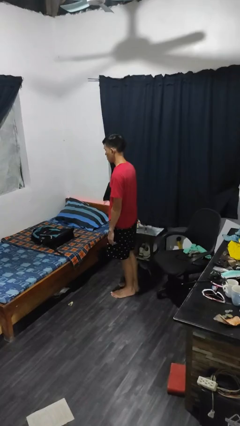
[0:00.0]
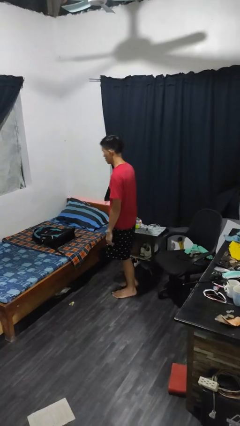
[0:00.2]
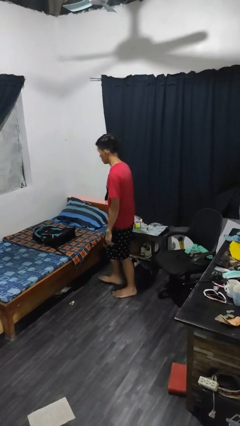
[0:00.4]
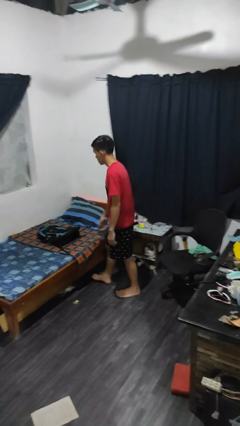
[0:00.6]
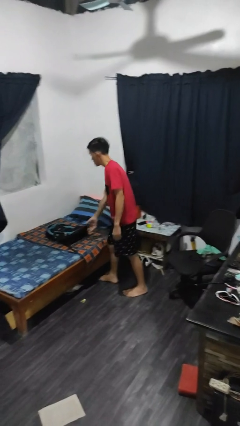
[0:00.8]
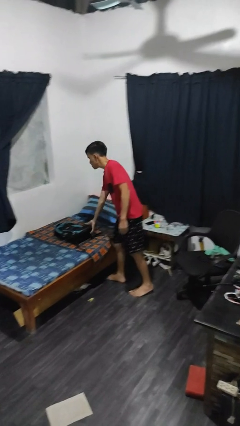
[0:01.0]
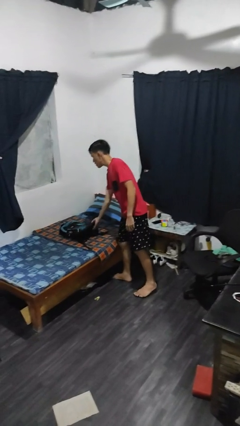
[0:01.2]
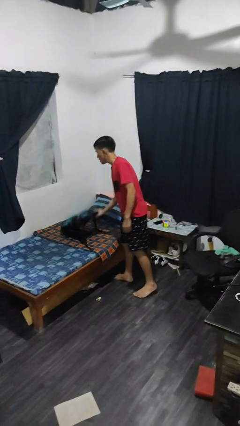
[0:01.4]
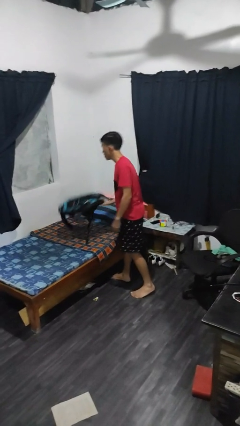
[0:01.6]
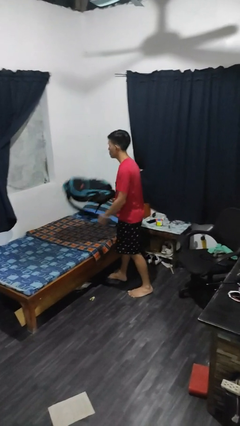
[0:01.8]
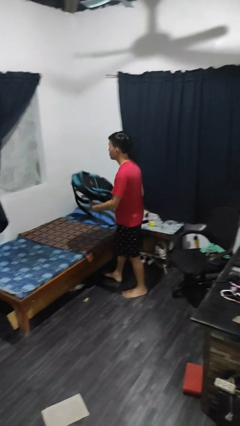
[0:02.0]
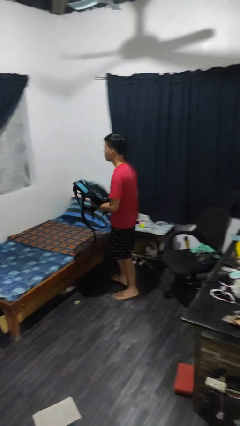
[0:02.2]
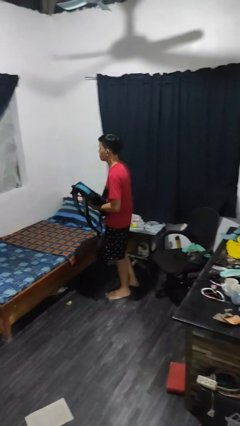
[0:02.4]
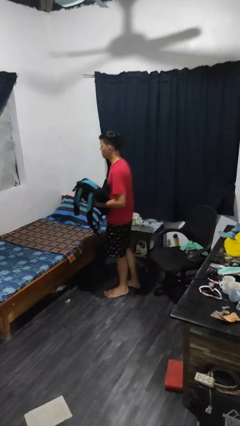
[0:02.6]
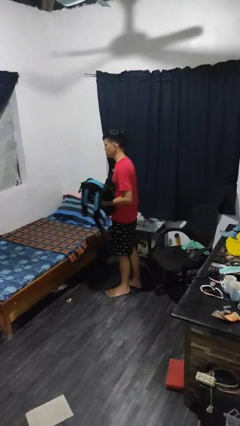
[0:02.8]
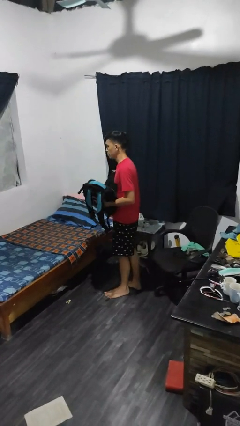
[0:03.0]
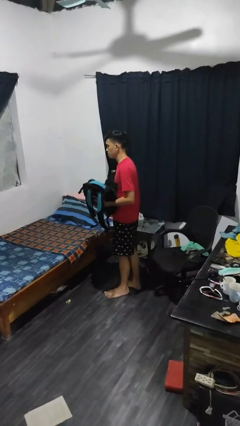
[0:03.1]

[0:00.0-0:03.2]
person picks up object from bed

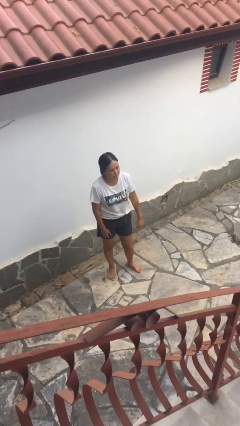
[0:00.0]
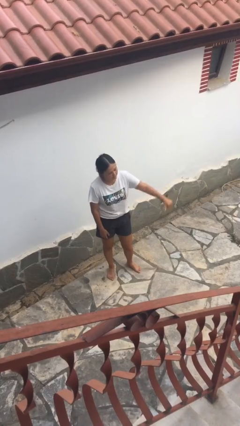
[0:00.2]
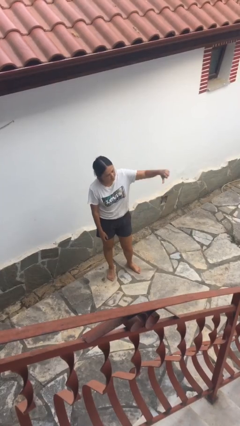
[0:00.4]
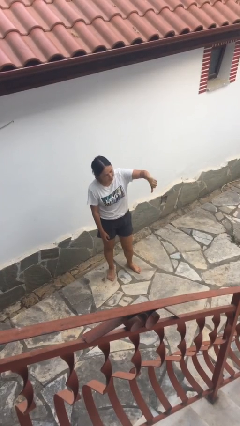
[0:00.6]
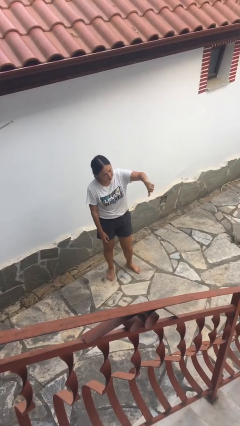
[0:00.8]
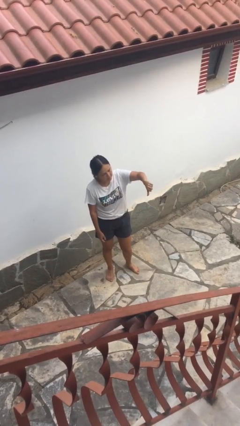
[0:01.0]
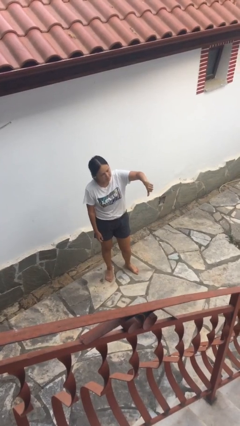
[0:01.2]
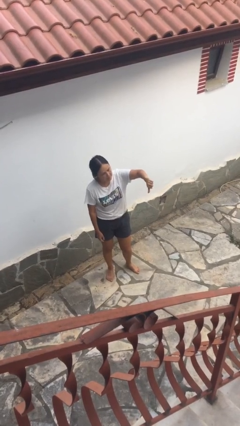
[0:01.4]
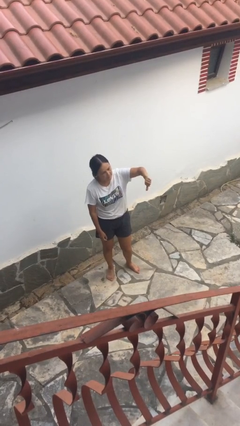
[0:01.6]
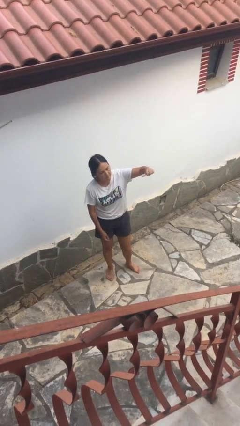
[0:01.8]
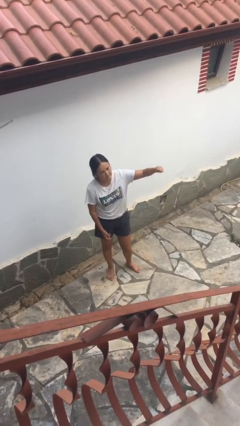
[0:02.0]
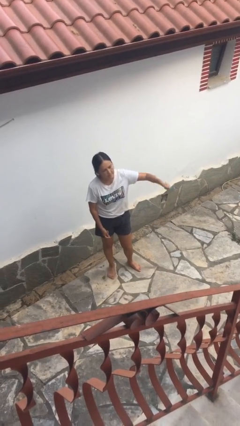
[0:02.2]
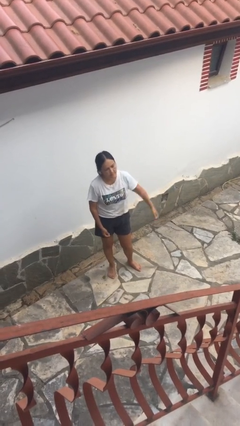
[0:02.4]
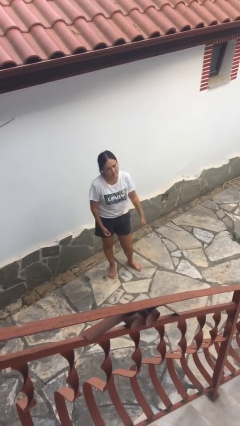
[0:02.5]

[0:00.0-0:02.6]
person gestures thumbs down

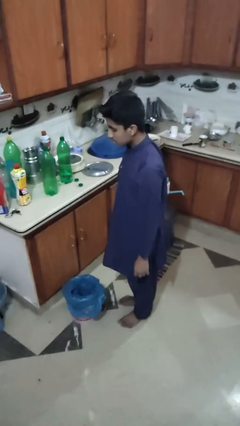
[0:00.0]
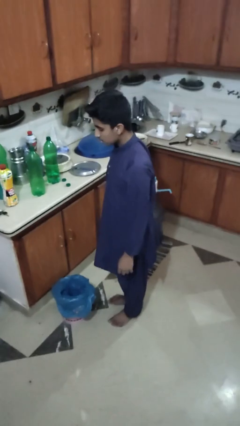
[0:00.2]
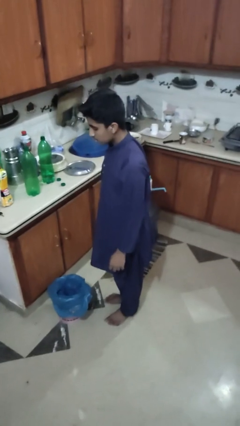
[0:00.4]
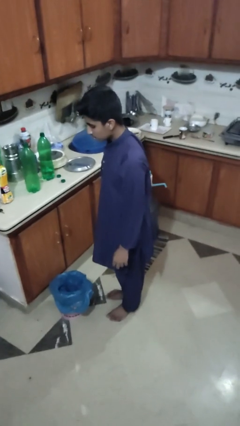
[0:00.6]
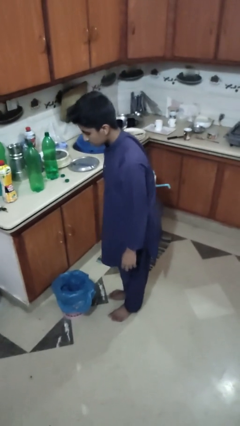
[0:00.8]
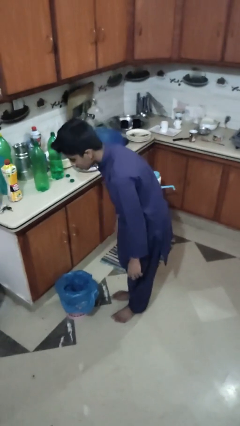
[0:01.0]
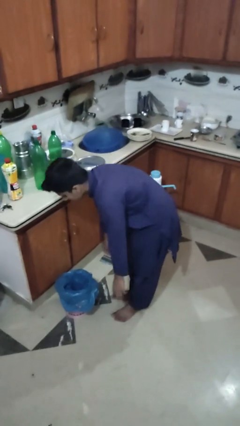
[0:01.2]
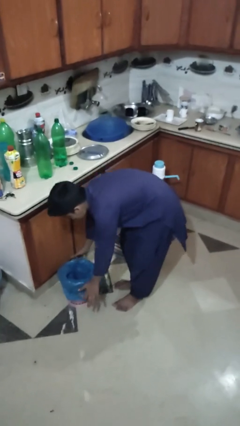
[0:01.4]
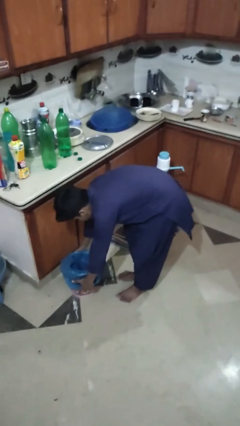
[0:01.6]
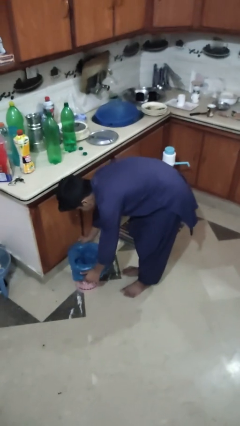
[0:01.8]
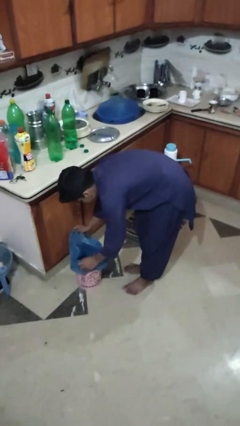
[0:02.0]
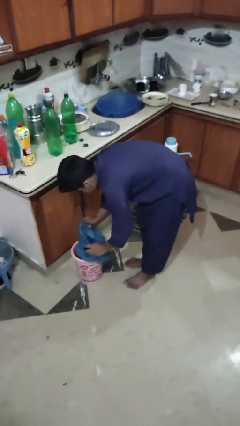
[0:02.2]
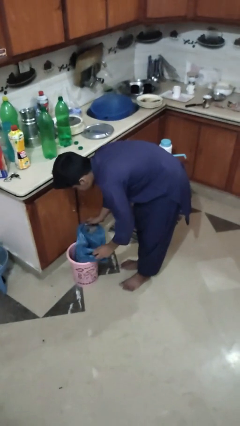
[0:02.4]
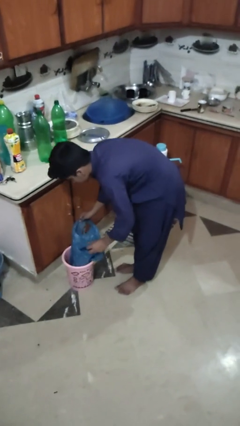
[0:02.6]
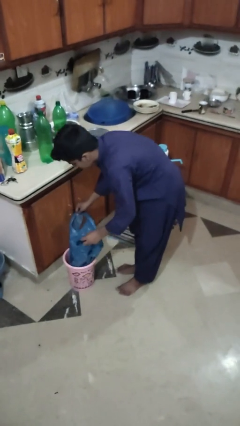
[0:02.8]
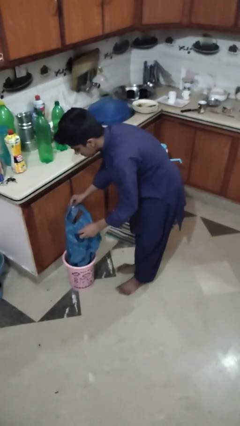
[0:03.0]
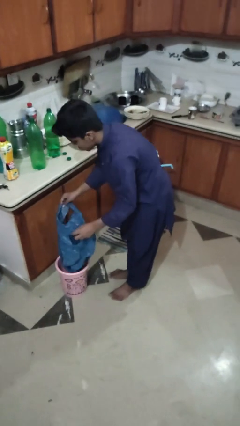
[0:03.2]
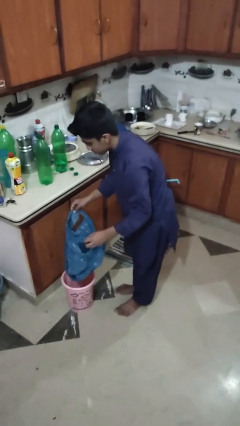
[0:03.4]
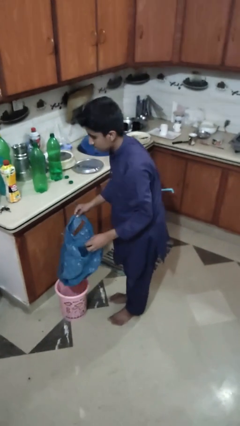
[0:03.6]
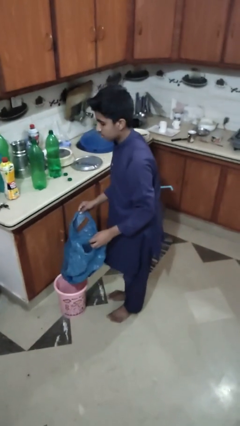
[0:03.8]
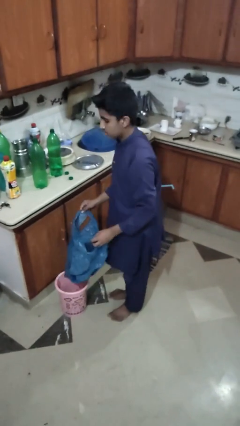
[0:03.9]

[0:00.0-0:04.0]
person removes trashbag from trashcan

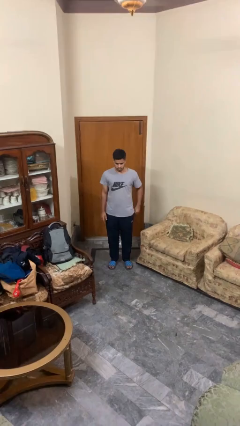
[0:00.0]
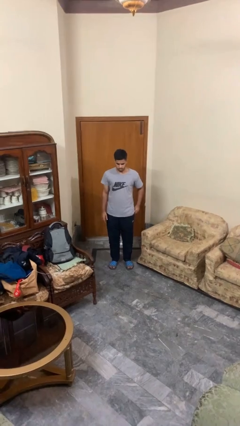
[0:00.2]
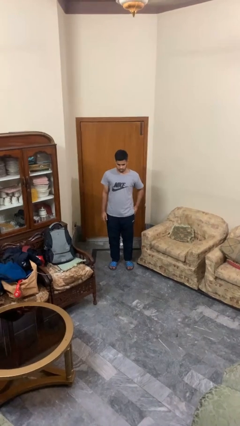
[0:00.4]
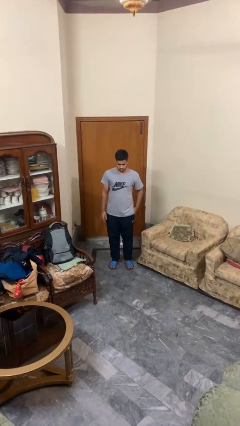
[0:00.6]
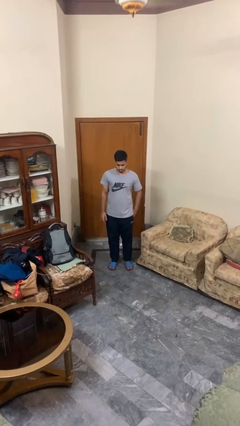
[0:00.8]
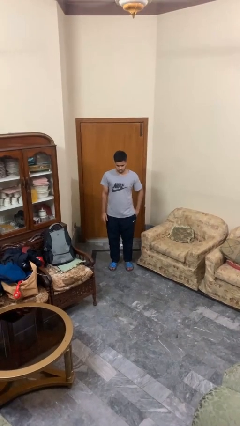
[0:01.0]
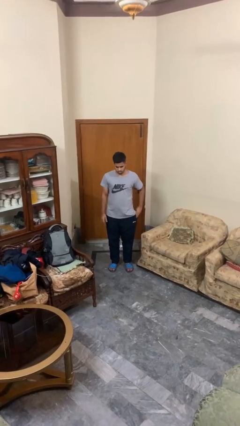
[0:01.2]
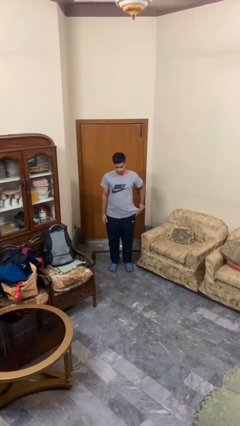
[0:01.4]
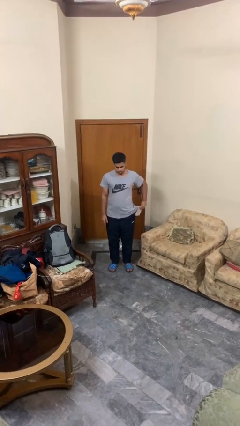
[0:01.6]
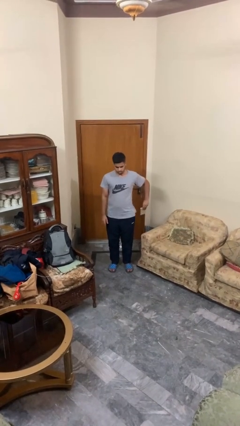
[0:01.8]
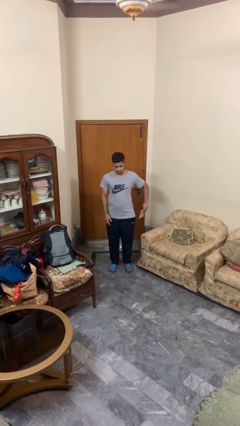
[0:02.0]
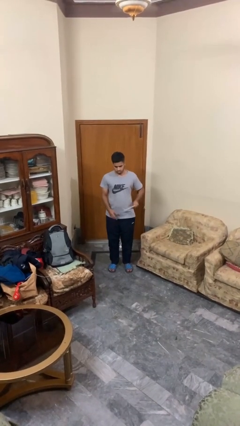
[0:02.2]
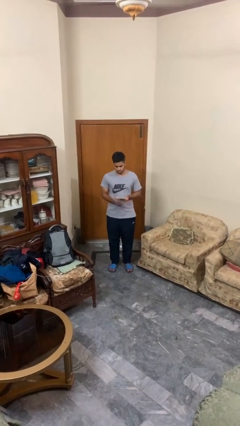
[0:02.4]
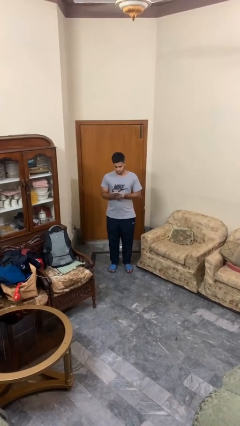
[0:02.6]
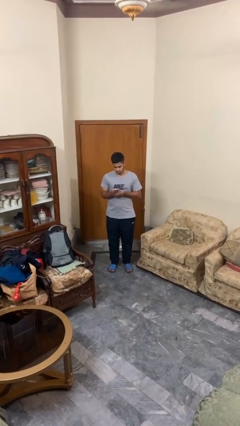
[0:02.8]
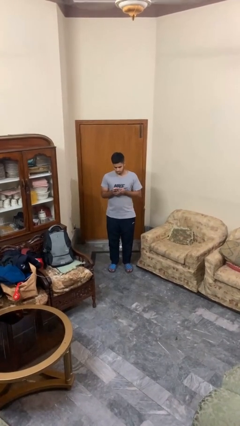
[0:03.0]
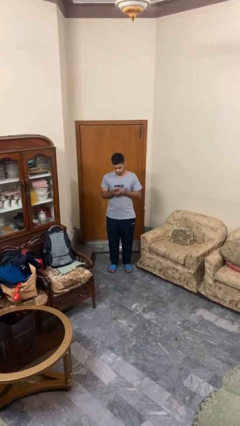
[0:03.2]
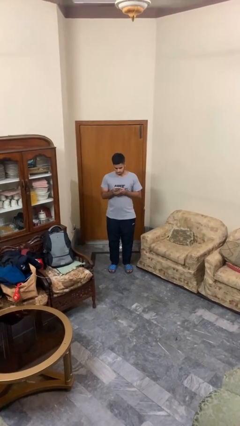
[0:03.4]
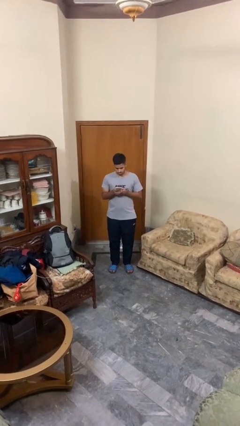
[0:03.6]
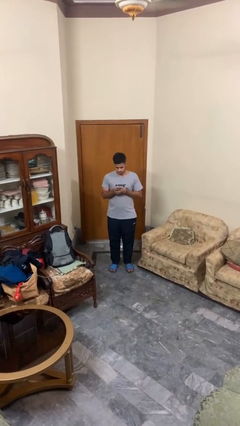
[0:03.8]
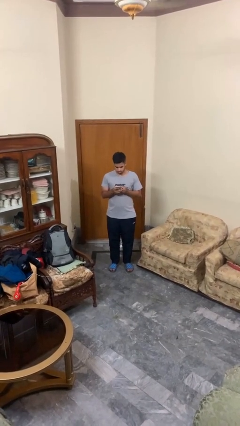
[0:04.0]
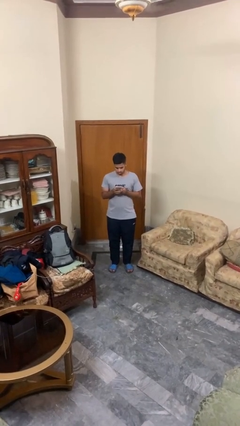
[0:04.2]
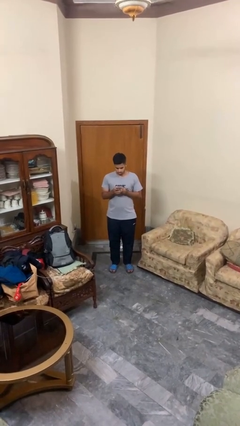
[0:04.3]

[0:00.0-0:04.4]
person takes phone from pocket

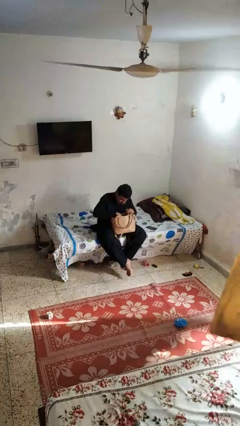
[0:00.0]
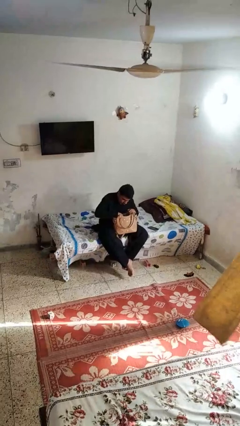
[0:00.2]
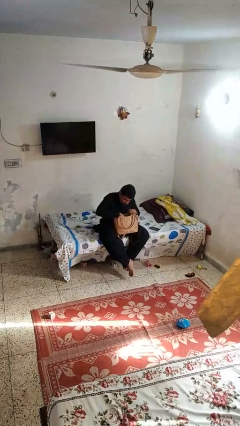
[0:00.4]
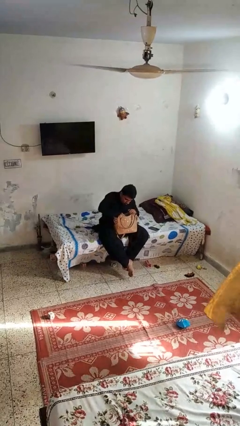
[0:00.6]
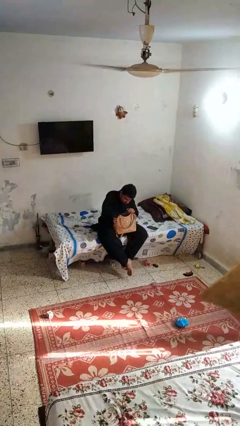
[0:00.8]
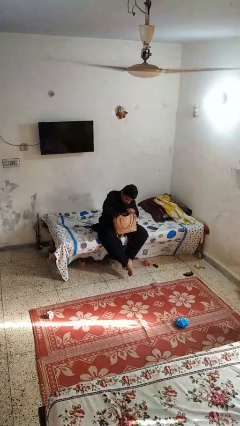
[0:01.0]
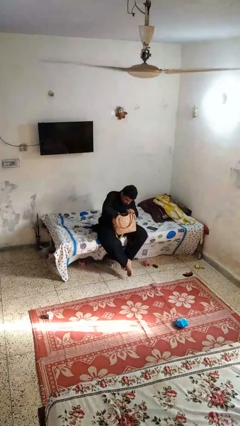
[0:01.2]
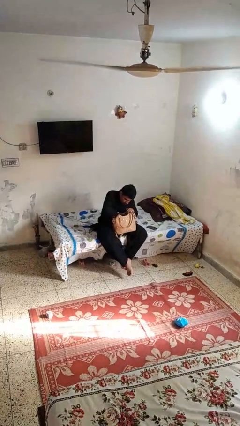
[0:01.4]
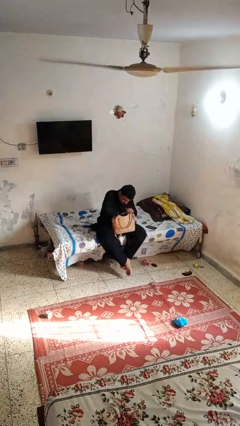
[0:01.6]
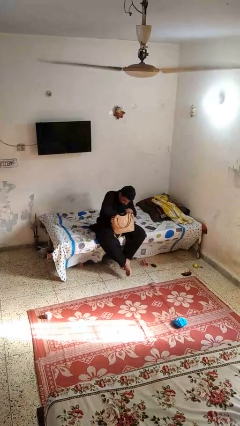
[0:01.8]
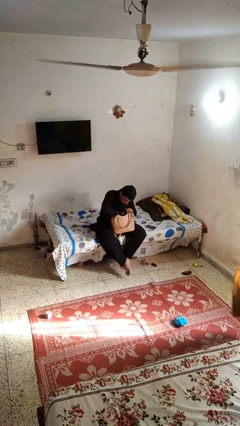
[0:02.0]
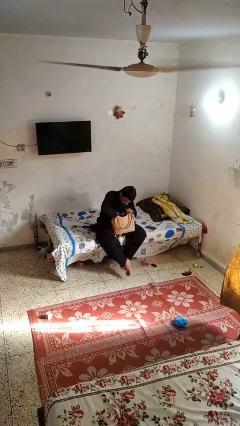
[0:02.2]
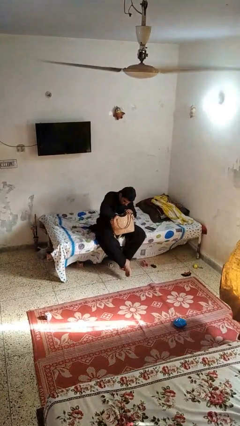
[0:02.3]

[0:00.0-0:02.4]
person searches in purse

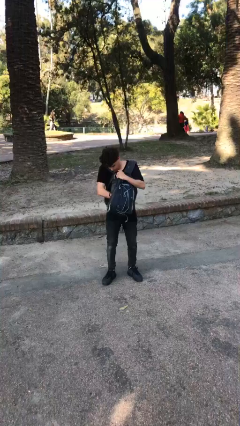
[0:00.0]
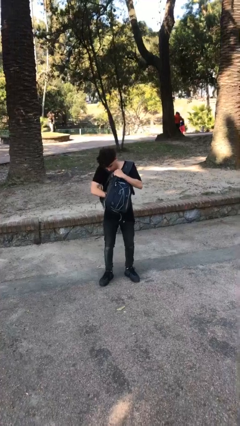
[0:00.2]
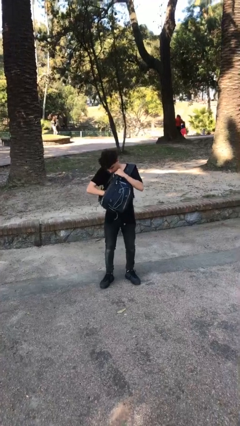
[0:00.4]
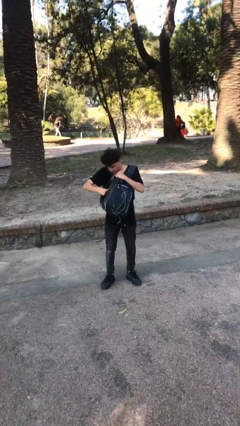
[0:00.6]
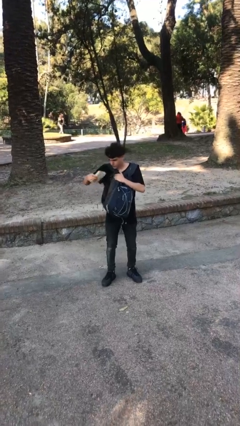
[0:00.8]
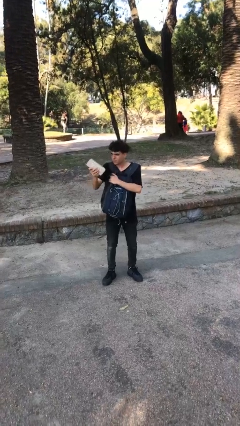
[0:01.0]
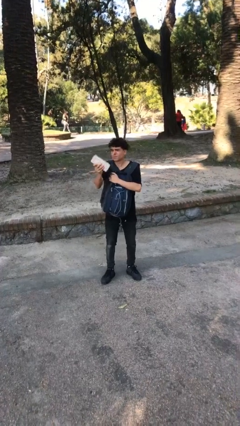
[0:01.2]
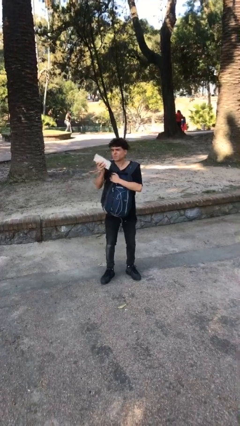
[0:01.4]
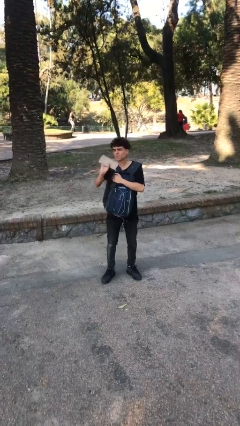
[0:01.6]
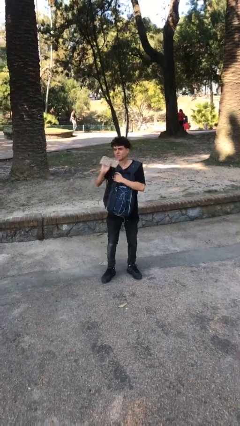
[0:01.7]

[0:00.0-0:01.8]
person takes object from backpack
